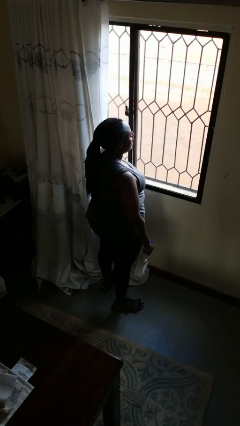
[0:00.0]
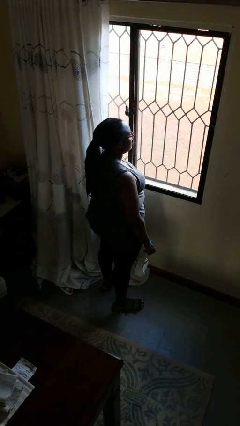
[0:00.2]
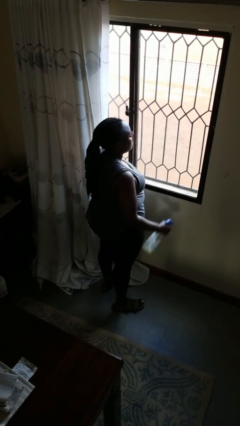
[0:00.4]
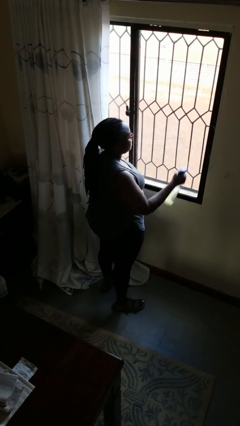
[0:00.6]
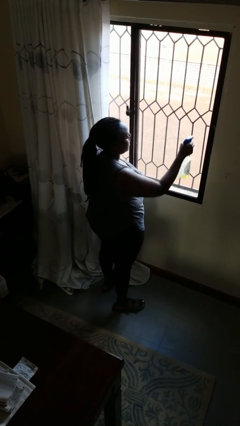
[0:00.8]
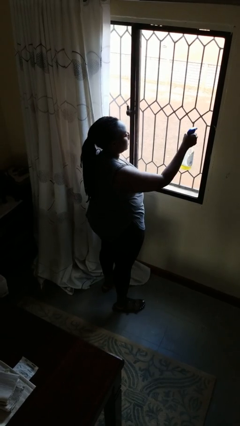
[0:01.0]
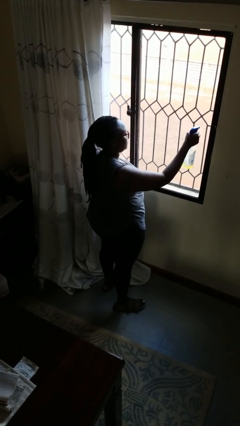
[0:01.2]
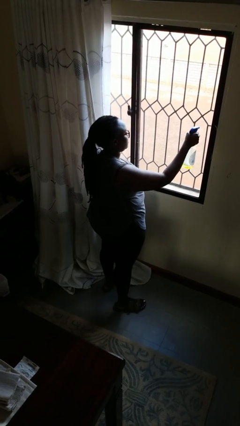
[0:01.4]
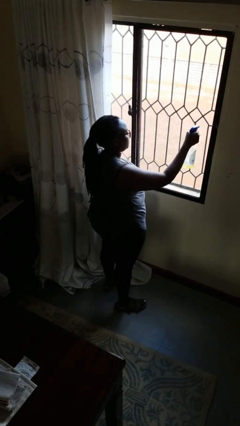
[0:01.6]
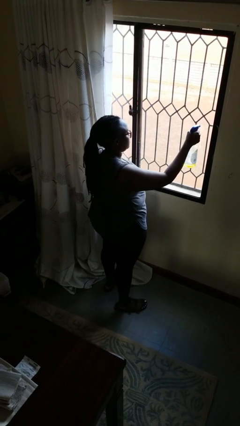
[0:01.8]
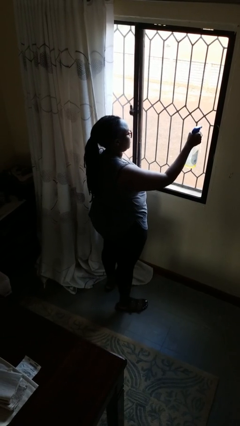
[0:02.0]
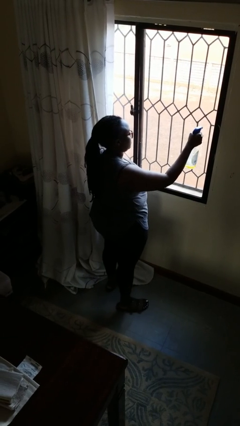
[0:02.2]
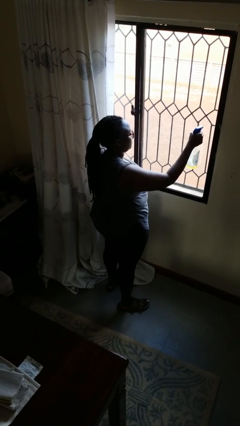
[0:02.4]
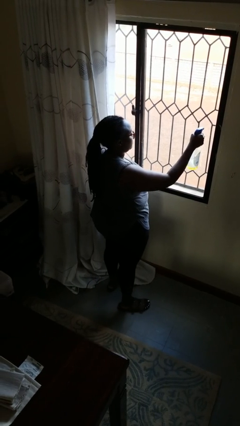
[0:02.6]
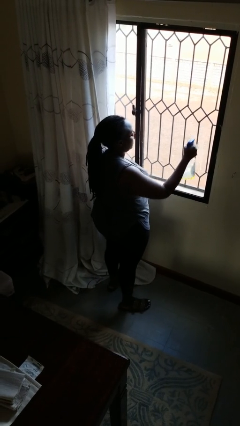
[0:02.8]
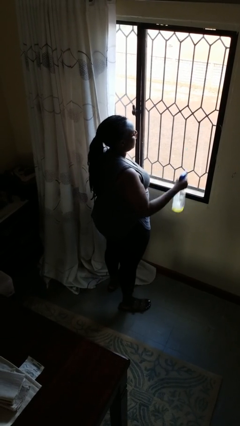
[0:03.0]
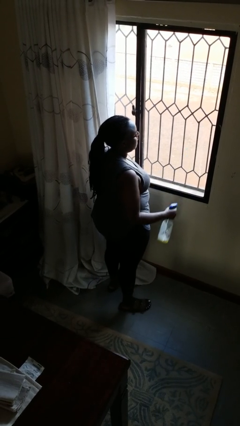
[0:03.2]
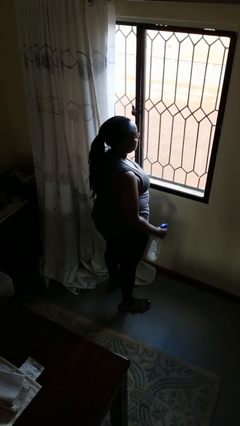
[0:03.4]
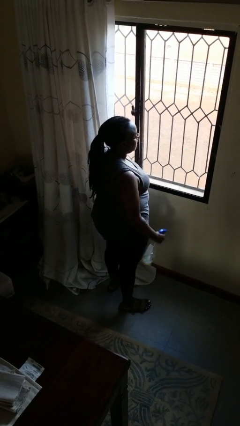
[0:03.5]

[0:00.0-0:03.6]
person sprays from bottle

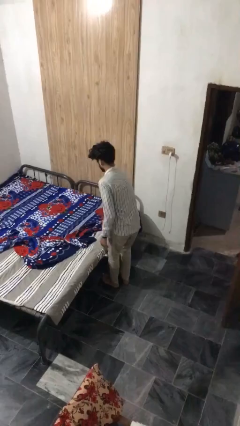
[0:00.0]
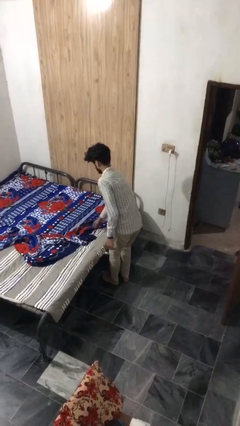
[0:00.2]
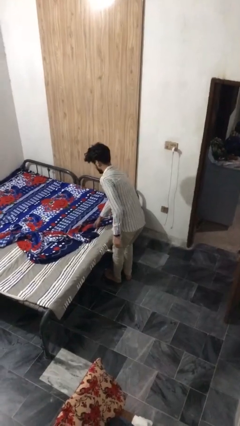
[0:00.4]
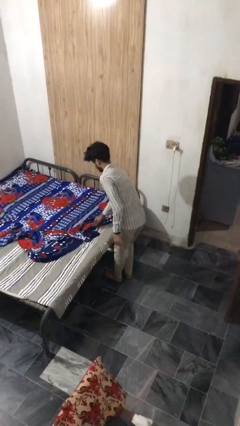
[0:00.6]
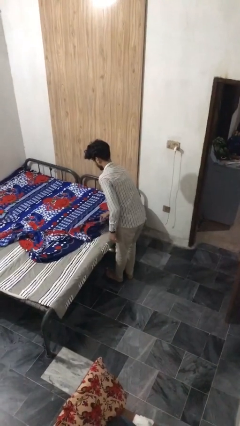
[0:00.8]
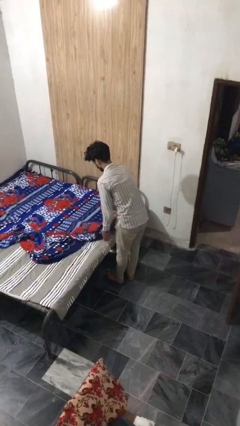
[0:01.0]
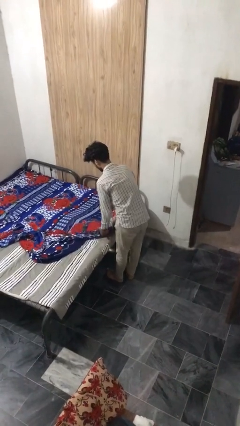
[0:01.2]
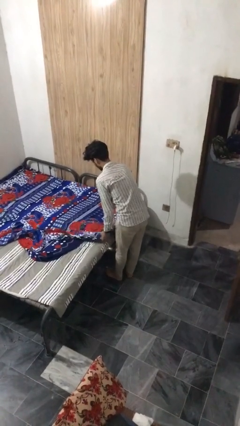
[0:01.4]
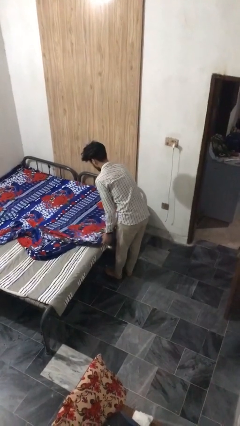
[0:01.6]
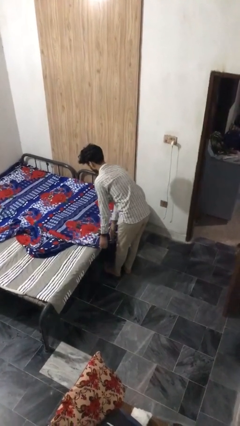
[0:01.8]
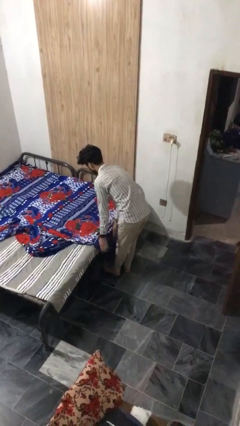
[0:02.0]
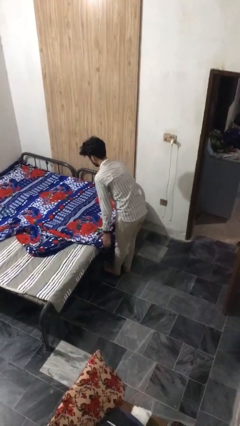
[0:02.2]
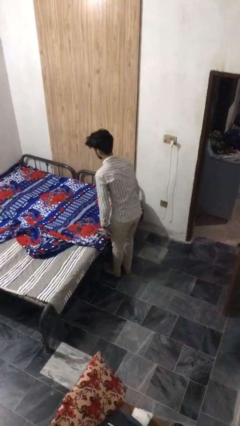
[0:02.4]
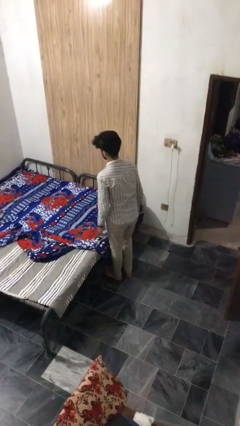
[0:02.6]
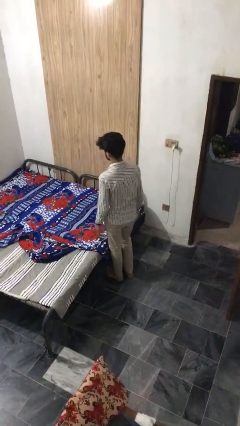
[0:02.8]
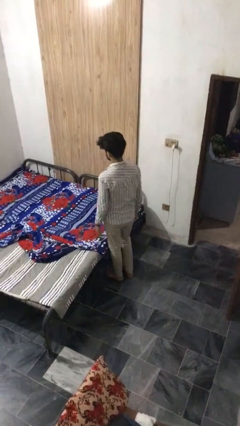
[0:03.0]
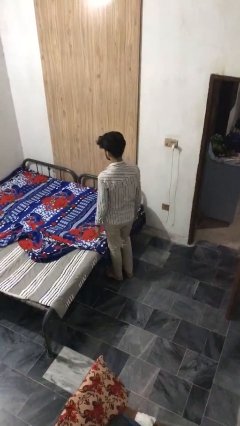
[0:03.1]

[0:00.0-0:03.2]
person makes bed

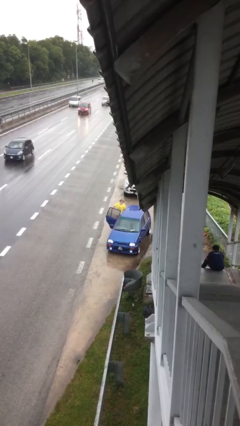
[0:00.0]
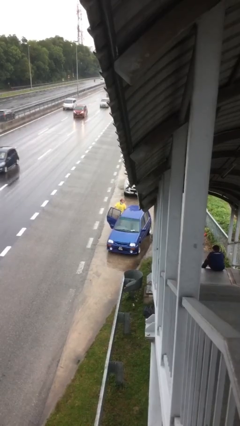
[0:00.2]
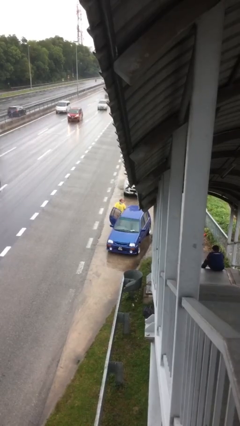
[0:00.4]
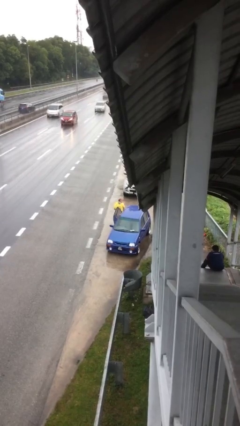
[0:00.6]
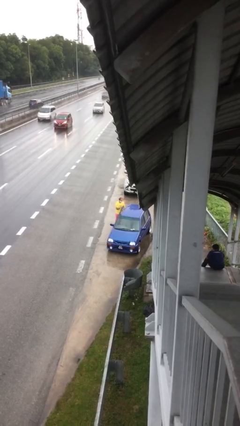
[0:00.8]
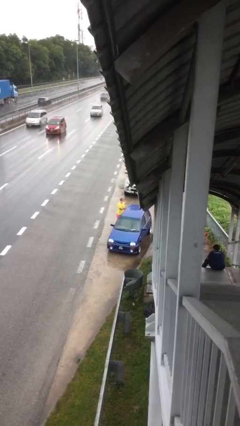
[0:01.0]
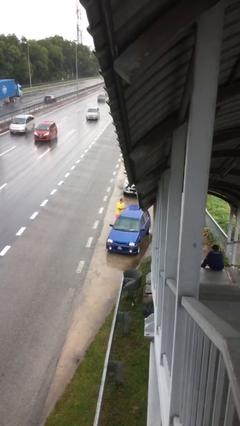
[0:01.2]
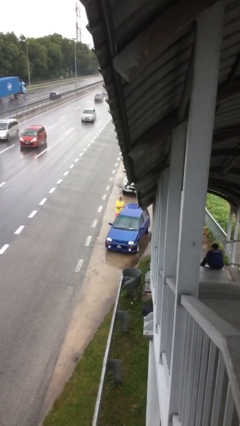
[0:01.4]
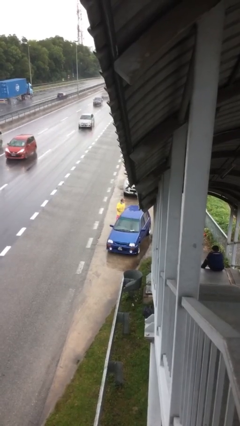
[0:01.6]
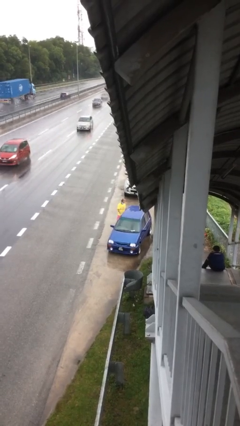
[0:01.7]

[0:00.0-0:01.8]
person closes car door

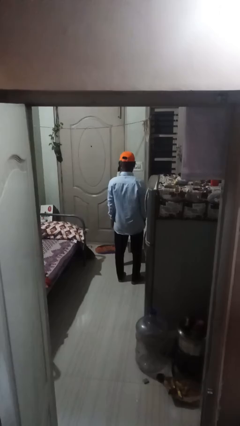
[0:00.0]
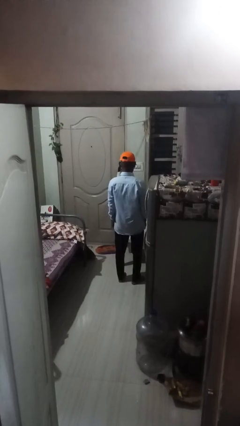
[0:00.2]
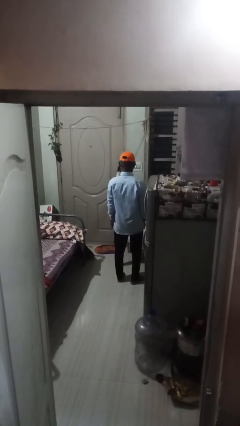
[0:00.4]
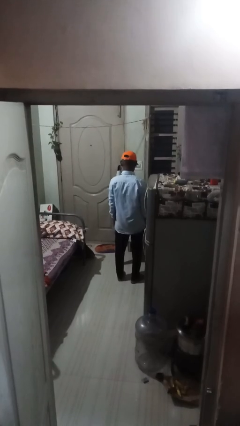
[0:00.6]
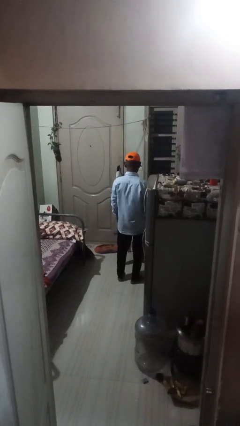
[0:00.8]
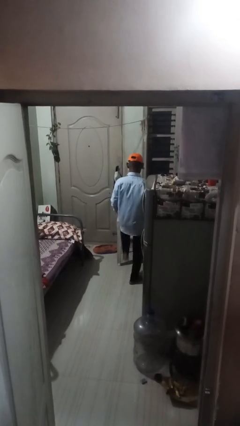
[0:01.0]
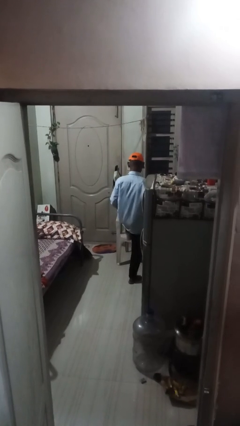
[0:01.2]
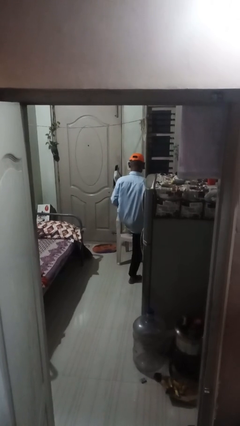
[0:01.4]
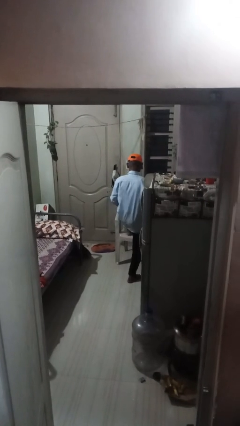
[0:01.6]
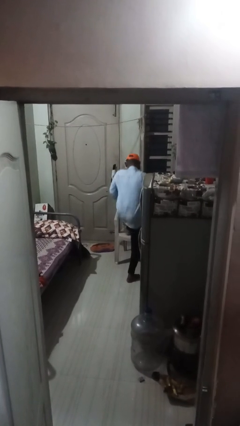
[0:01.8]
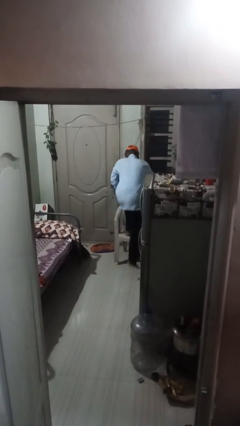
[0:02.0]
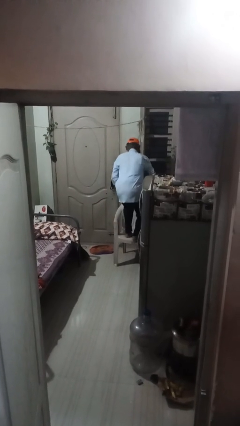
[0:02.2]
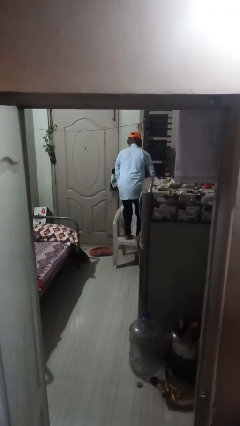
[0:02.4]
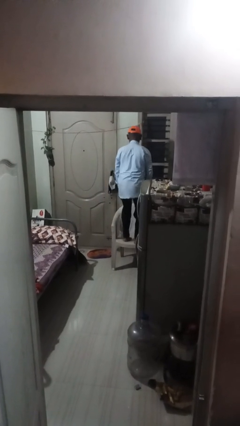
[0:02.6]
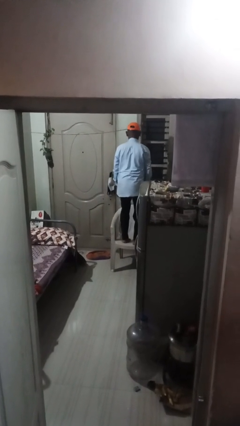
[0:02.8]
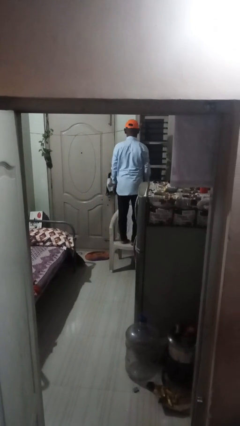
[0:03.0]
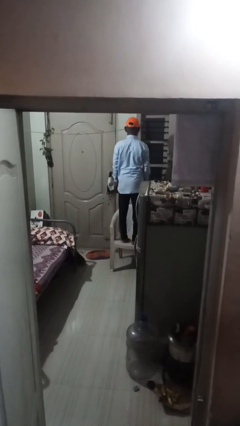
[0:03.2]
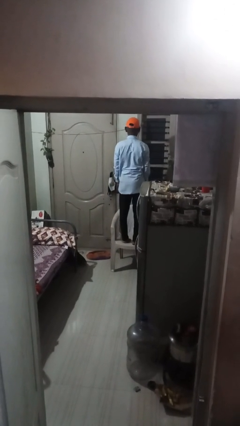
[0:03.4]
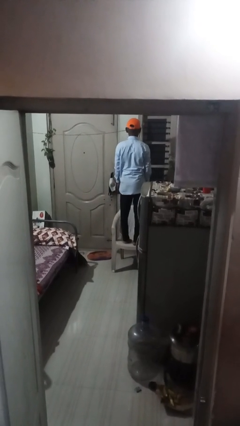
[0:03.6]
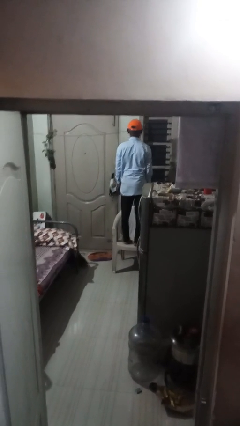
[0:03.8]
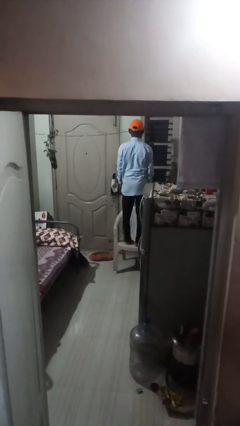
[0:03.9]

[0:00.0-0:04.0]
person climbs on chair

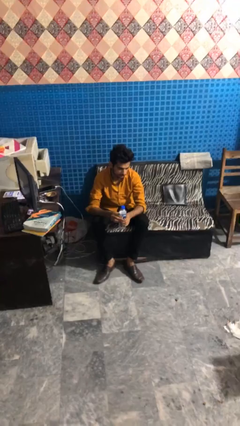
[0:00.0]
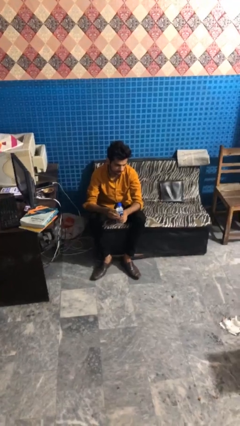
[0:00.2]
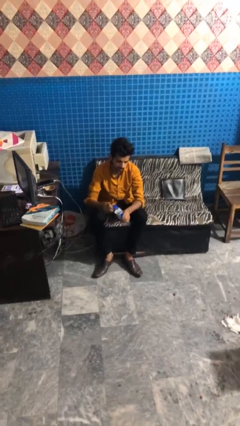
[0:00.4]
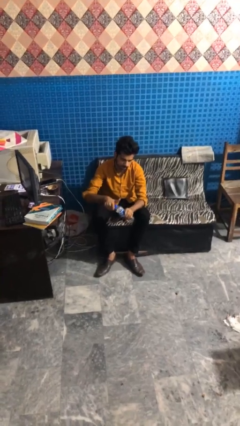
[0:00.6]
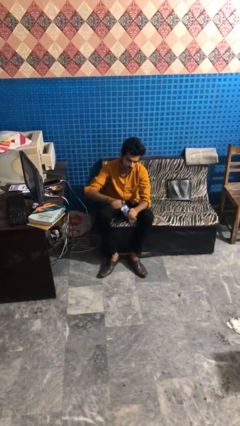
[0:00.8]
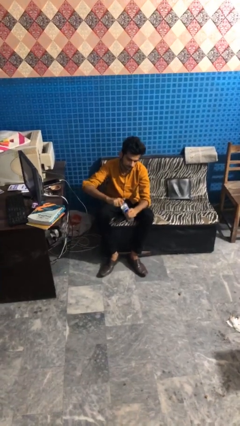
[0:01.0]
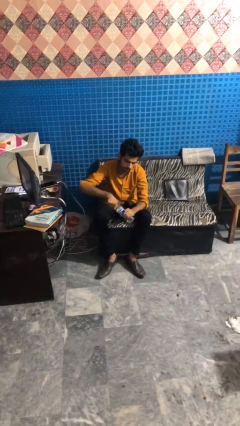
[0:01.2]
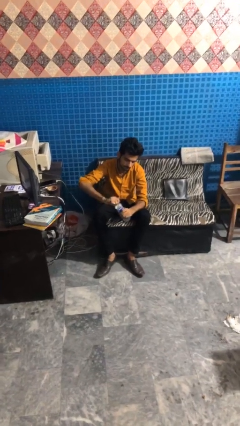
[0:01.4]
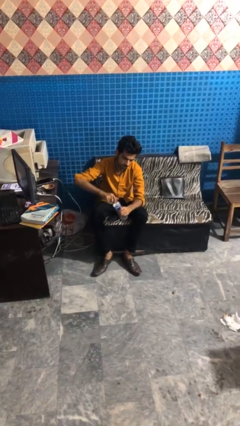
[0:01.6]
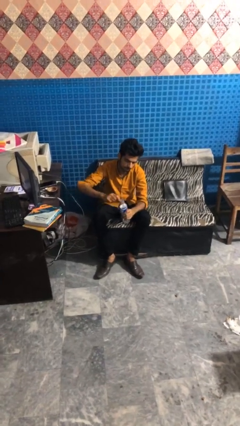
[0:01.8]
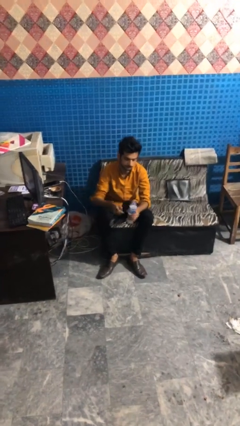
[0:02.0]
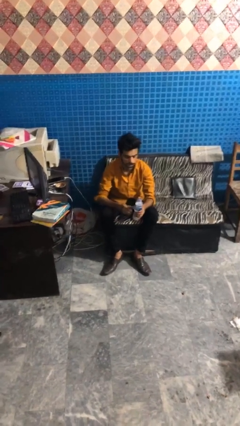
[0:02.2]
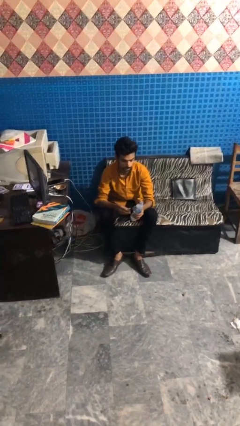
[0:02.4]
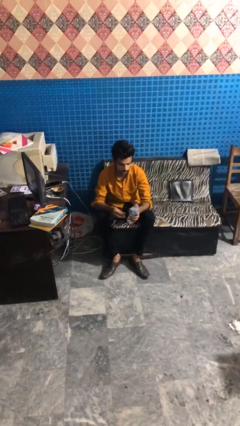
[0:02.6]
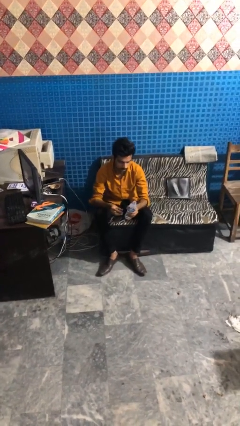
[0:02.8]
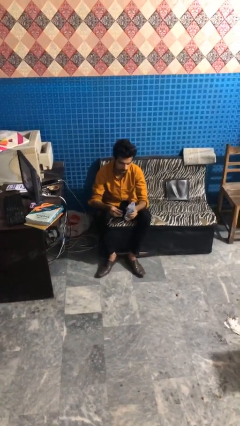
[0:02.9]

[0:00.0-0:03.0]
person unscrews lid from bottle

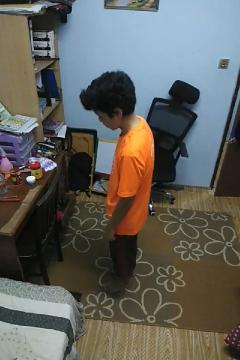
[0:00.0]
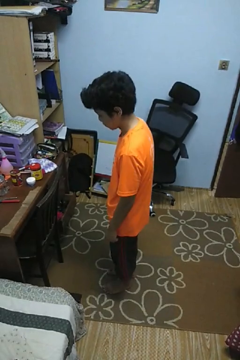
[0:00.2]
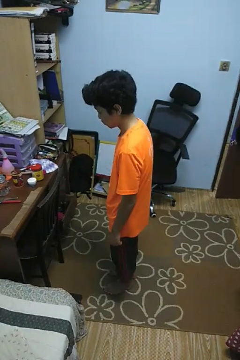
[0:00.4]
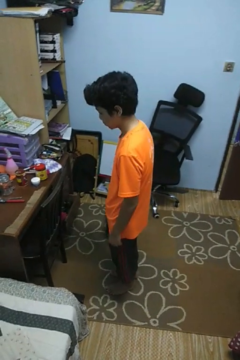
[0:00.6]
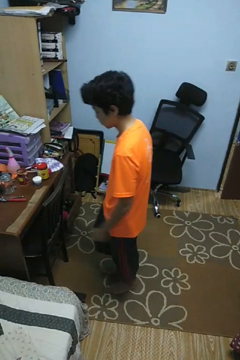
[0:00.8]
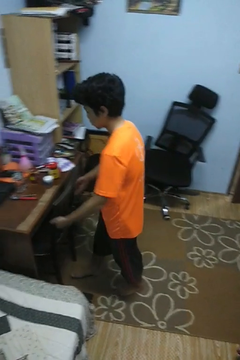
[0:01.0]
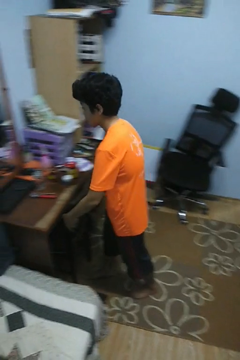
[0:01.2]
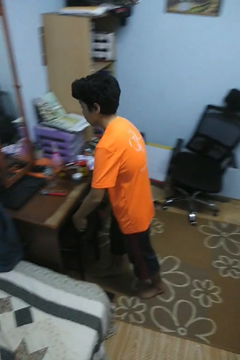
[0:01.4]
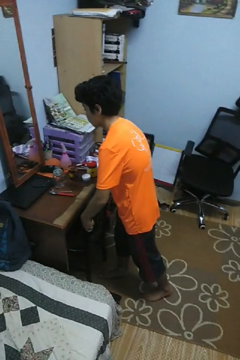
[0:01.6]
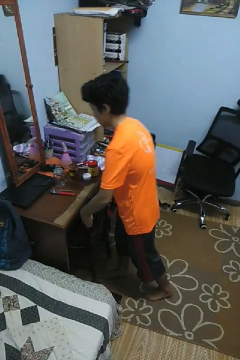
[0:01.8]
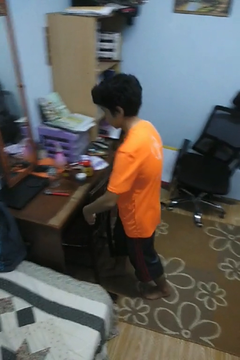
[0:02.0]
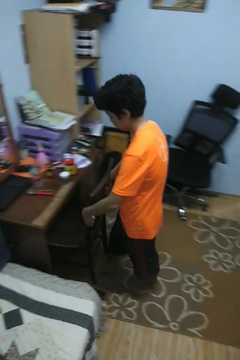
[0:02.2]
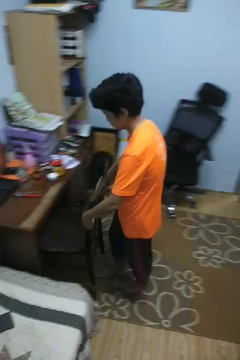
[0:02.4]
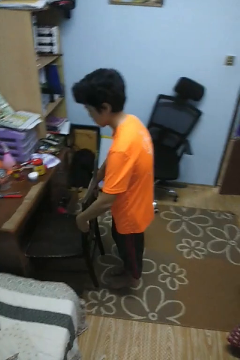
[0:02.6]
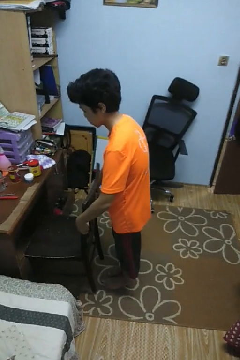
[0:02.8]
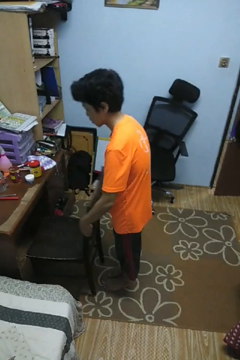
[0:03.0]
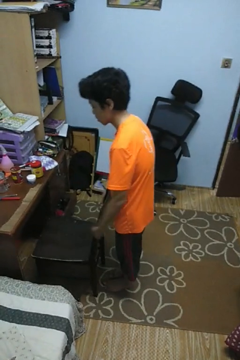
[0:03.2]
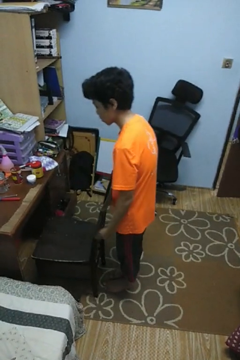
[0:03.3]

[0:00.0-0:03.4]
person pulls out chair
